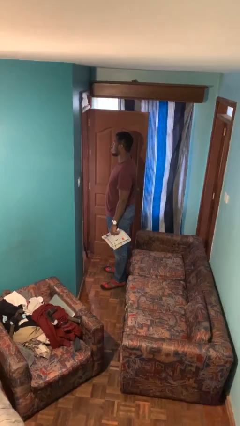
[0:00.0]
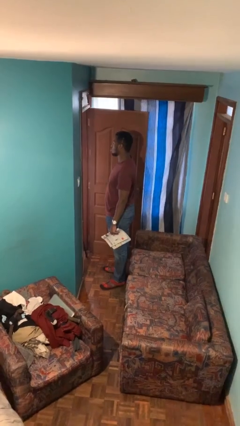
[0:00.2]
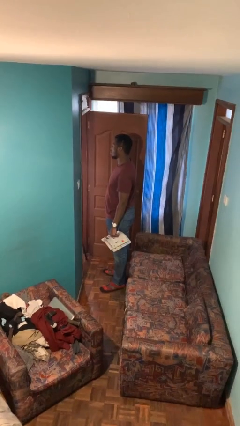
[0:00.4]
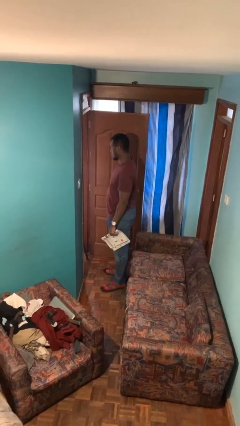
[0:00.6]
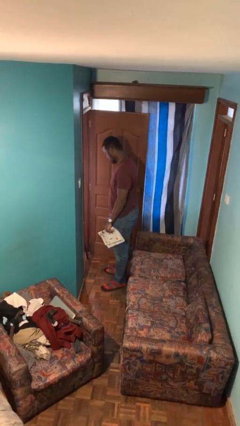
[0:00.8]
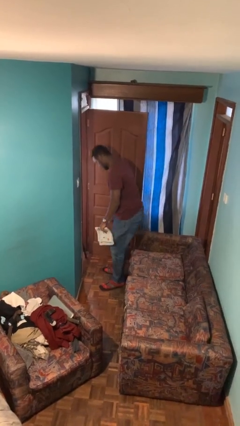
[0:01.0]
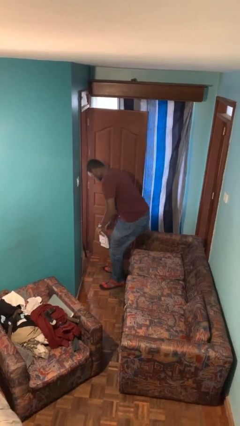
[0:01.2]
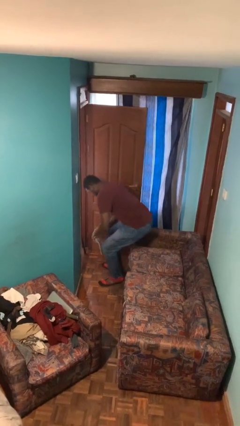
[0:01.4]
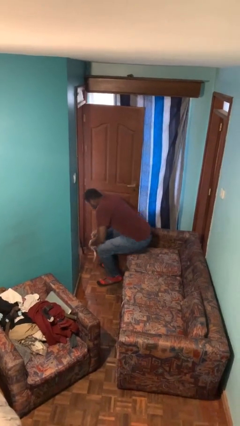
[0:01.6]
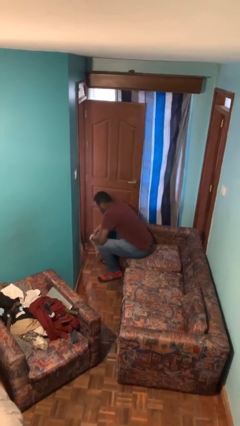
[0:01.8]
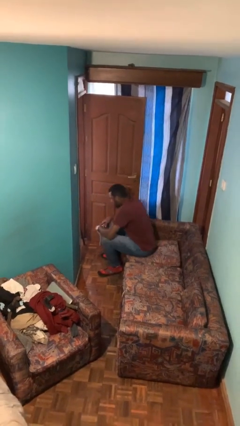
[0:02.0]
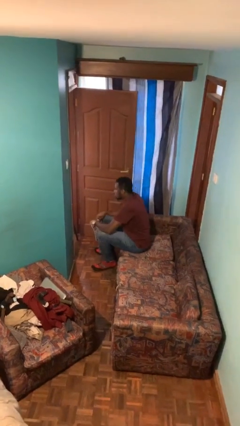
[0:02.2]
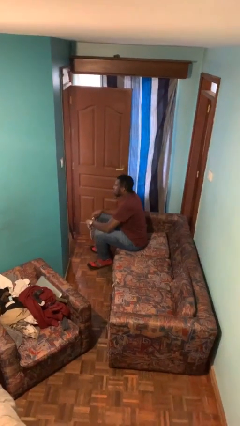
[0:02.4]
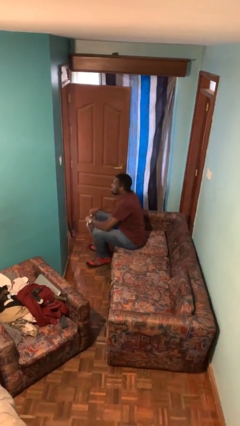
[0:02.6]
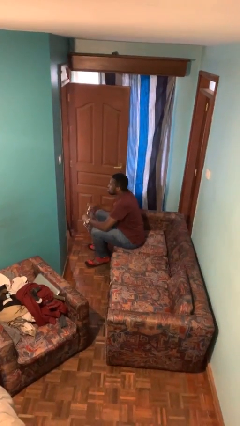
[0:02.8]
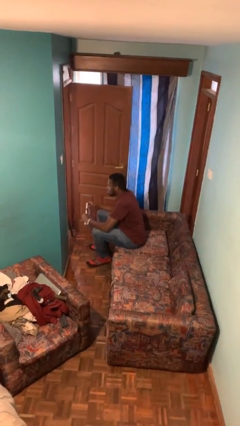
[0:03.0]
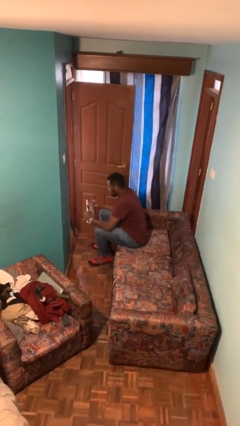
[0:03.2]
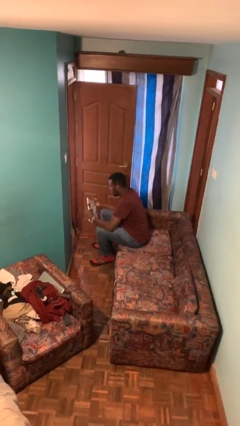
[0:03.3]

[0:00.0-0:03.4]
person sits down

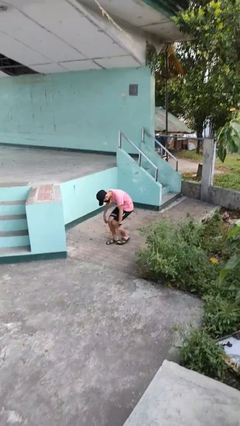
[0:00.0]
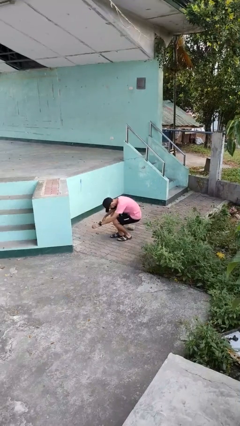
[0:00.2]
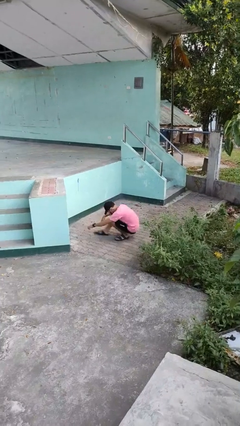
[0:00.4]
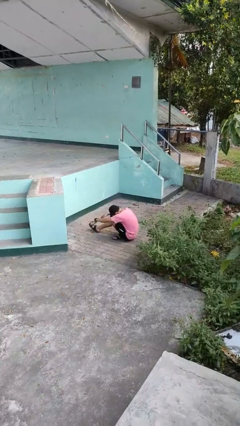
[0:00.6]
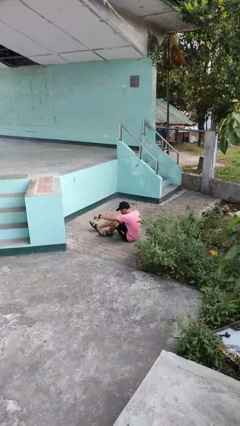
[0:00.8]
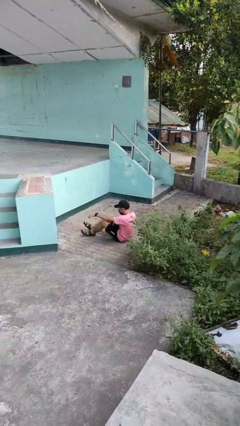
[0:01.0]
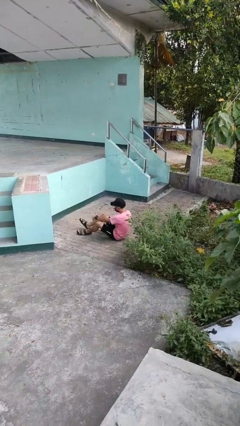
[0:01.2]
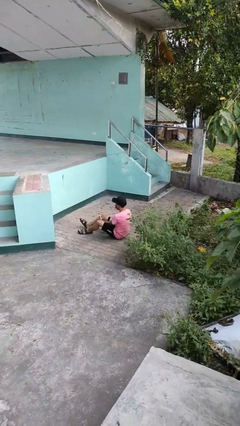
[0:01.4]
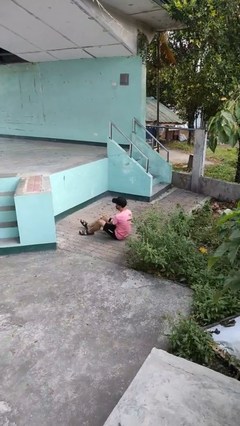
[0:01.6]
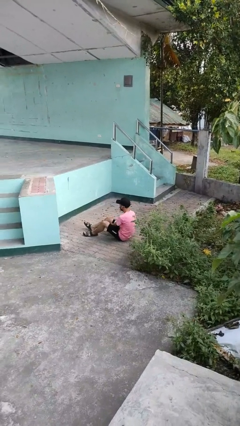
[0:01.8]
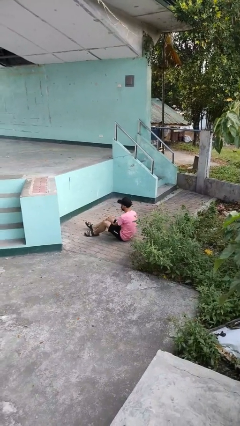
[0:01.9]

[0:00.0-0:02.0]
person lies down on floor

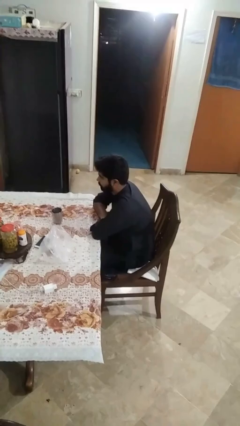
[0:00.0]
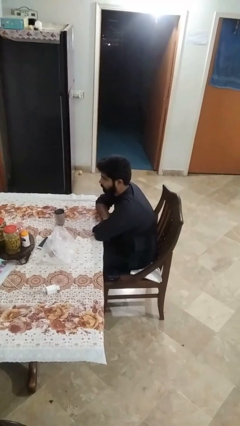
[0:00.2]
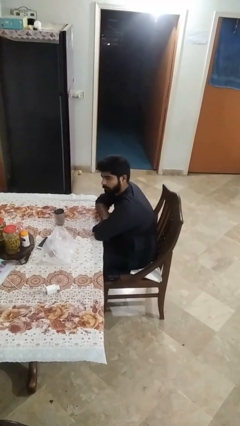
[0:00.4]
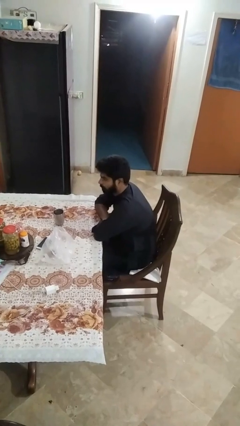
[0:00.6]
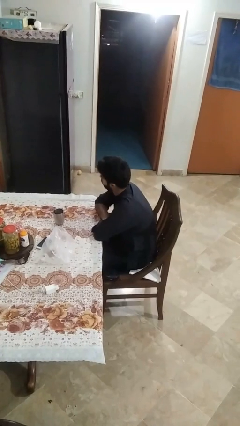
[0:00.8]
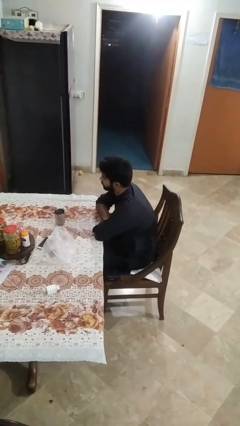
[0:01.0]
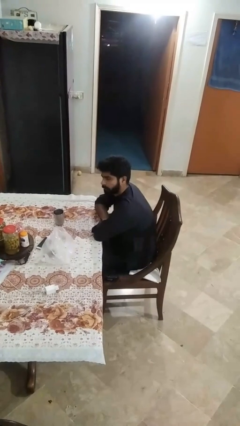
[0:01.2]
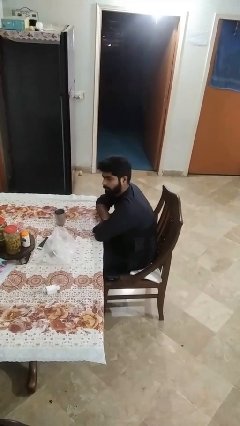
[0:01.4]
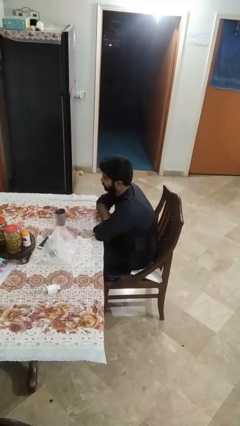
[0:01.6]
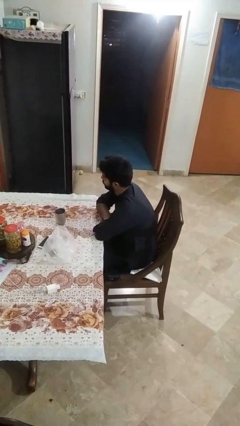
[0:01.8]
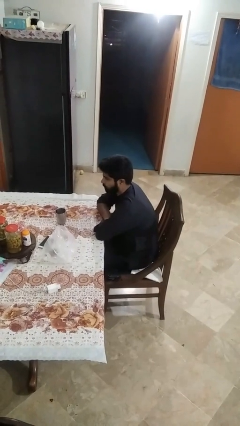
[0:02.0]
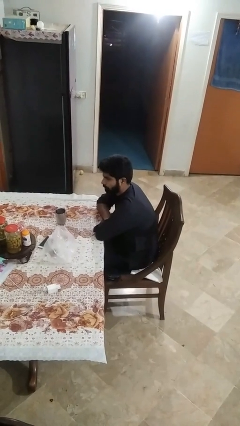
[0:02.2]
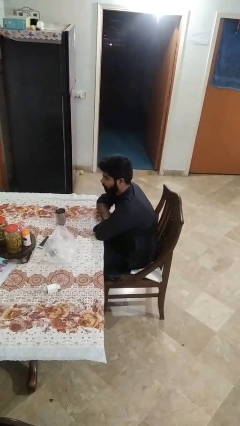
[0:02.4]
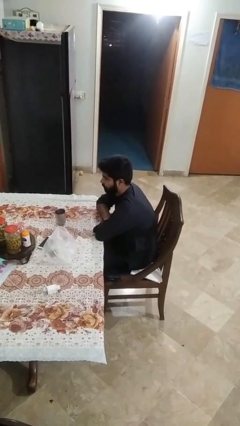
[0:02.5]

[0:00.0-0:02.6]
person shakes head

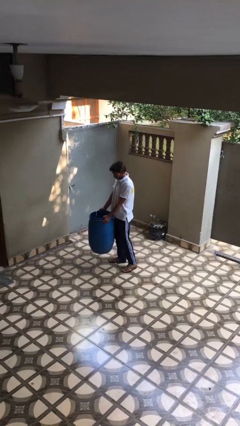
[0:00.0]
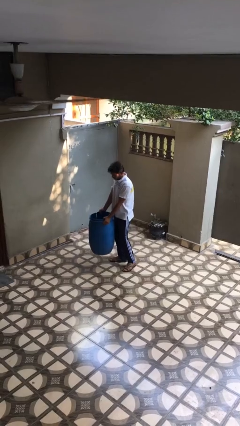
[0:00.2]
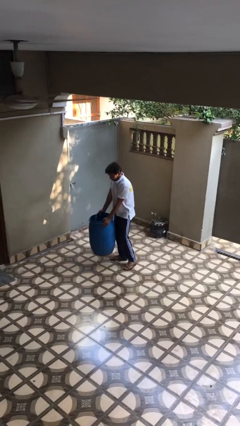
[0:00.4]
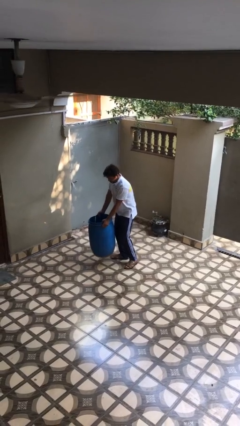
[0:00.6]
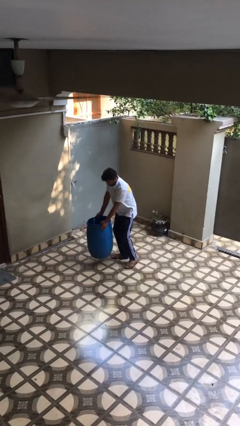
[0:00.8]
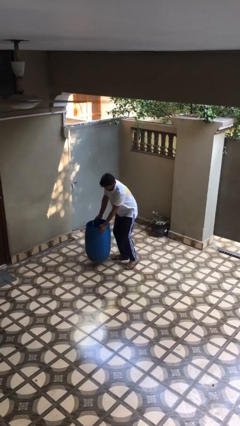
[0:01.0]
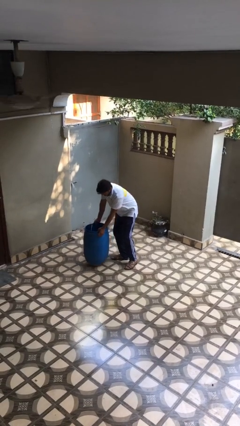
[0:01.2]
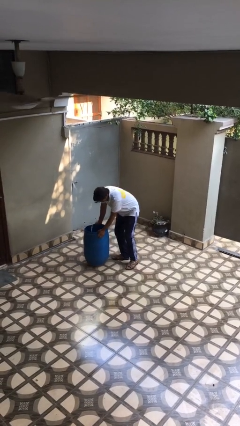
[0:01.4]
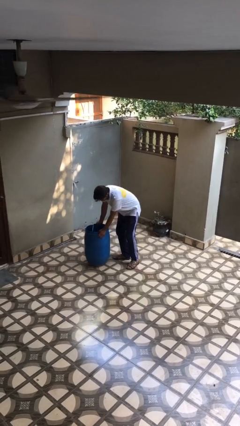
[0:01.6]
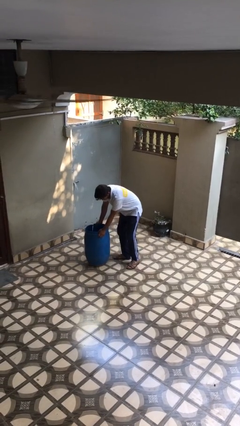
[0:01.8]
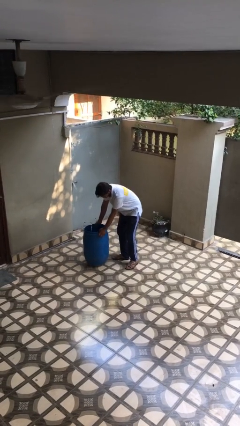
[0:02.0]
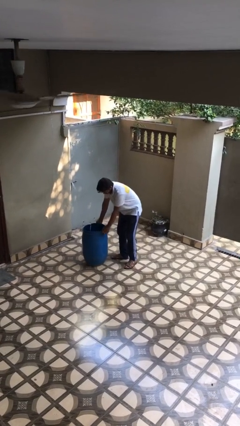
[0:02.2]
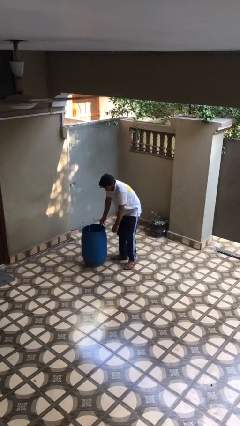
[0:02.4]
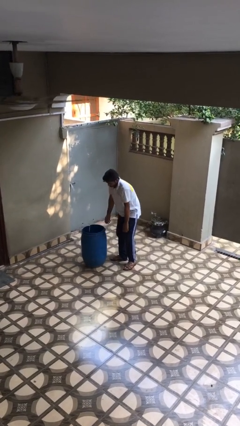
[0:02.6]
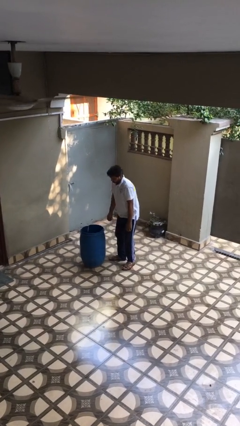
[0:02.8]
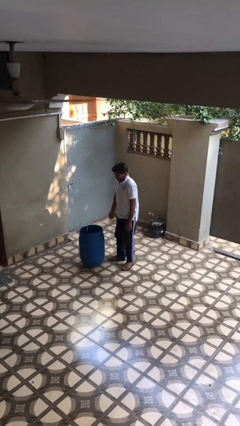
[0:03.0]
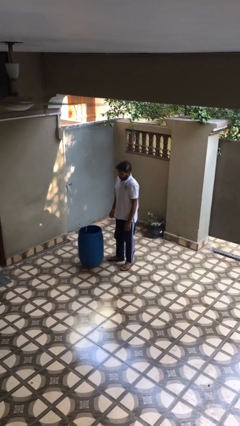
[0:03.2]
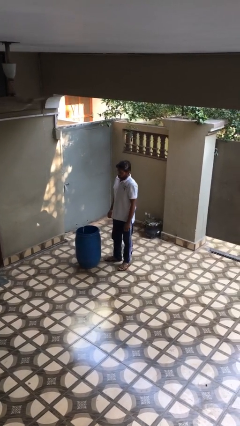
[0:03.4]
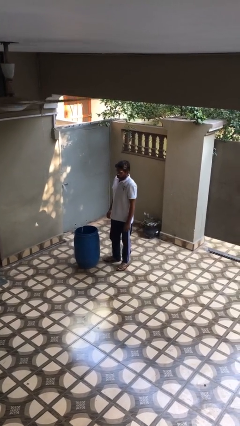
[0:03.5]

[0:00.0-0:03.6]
person puts down object on floor

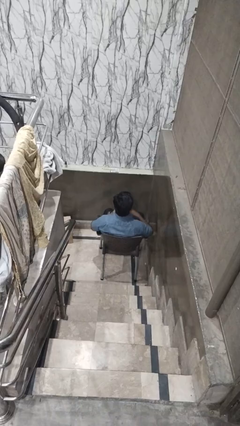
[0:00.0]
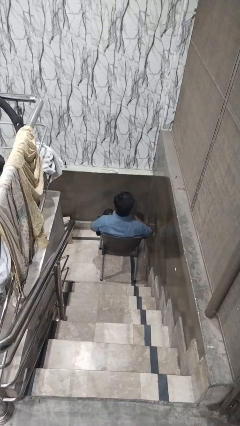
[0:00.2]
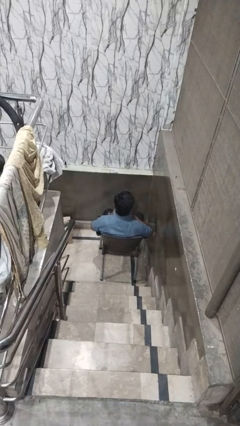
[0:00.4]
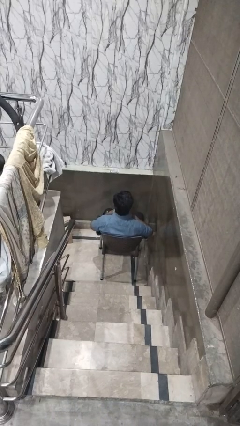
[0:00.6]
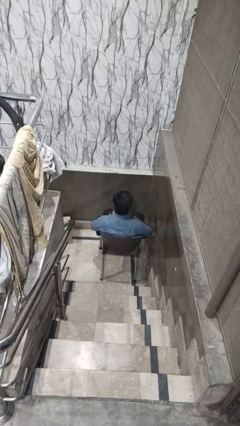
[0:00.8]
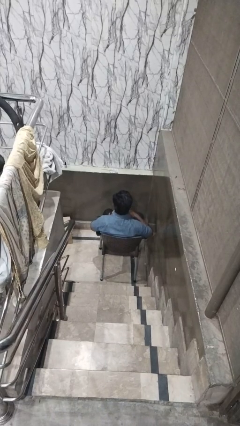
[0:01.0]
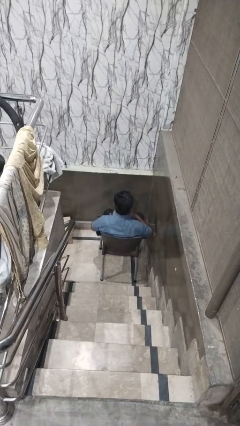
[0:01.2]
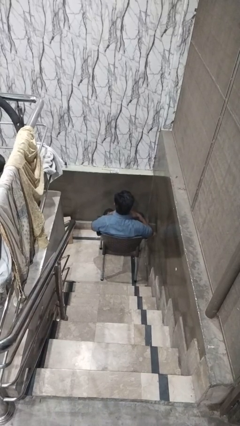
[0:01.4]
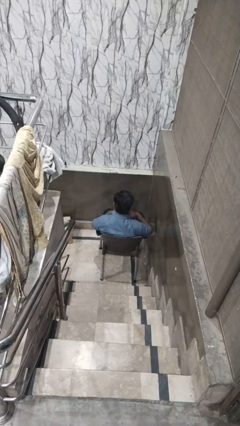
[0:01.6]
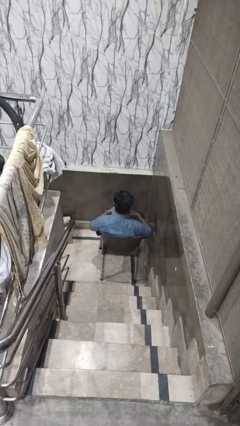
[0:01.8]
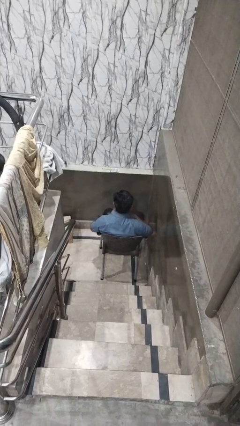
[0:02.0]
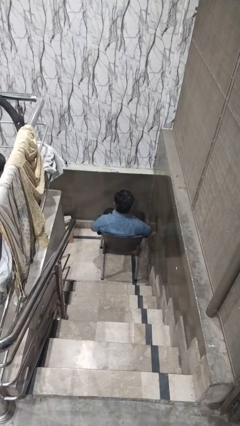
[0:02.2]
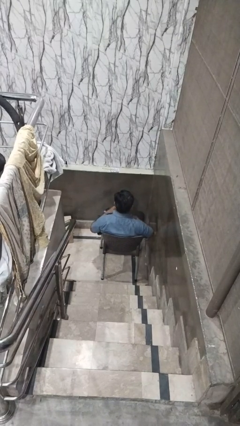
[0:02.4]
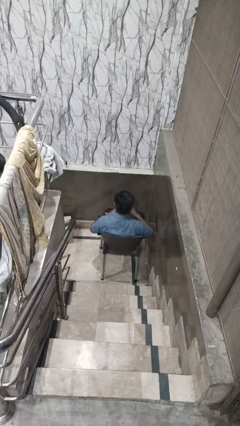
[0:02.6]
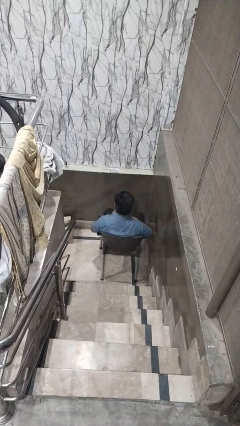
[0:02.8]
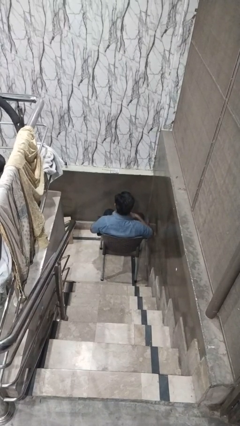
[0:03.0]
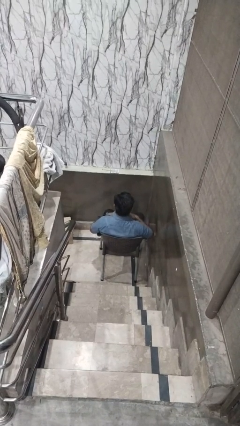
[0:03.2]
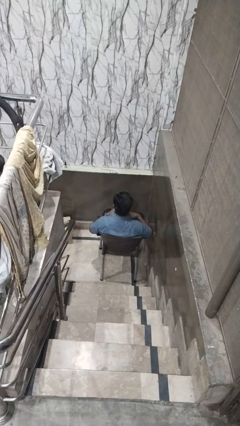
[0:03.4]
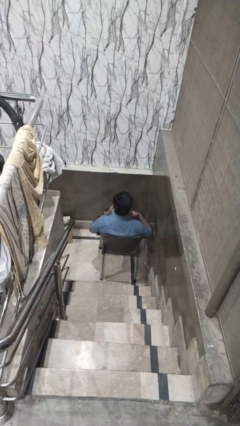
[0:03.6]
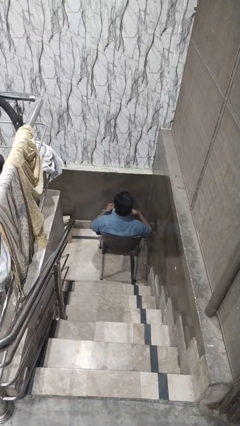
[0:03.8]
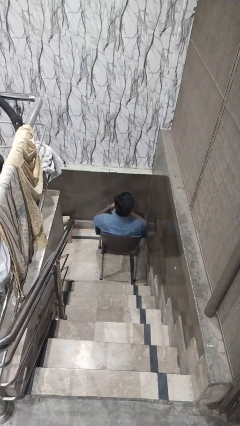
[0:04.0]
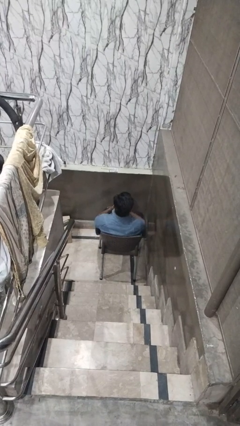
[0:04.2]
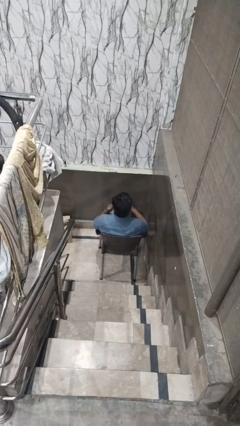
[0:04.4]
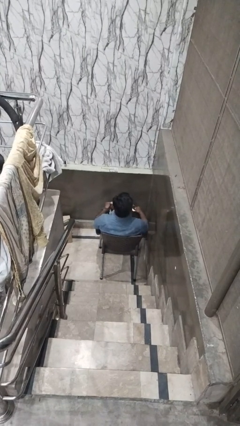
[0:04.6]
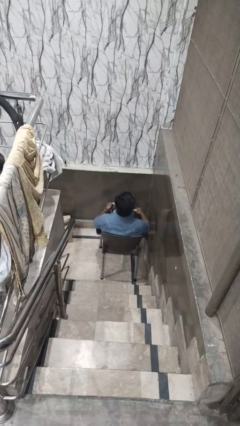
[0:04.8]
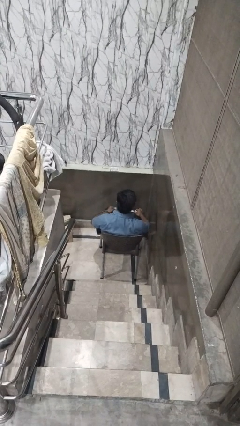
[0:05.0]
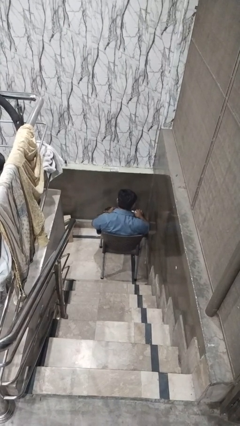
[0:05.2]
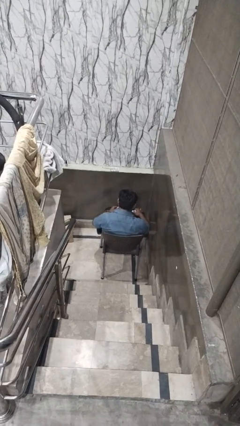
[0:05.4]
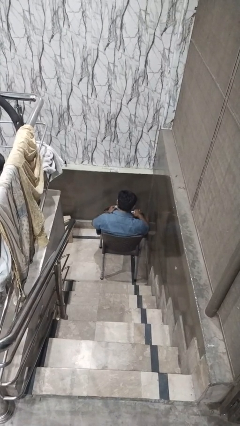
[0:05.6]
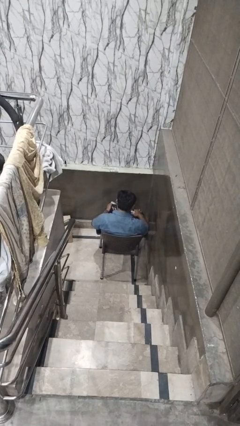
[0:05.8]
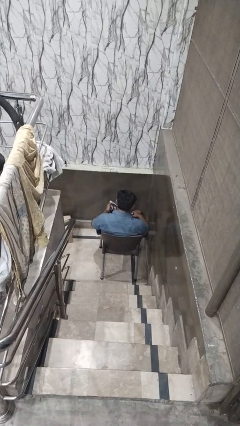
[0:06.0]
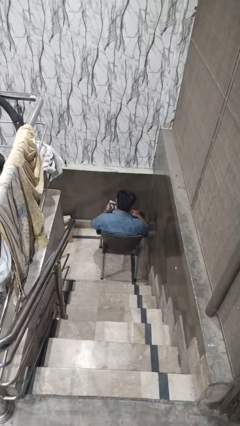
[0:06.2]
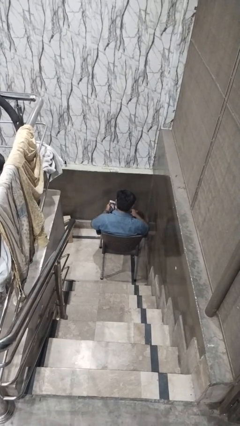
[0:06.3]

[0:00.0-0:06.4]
person takes off necktie
